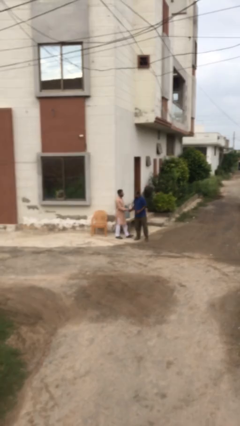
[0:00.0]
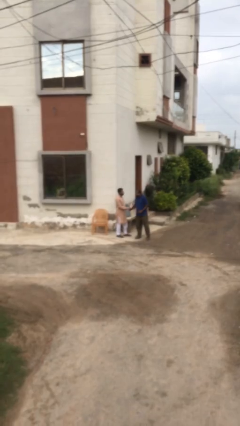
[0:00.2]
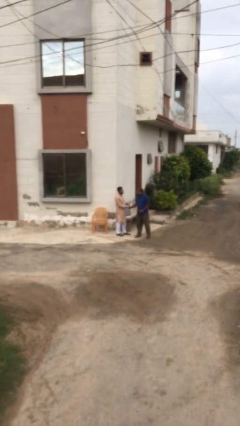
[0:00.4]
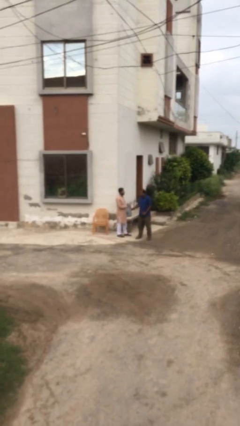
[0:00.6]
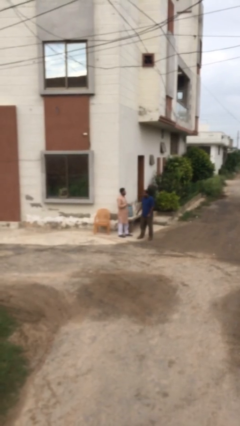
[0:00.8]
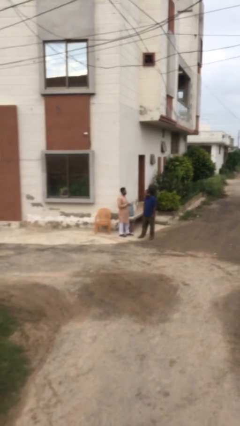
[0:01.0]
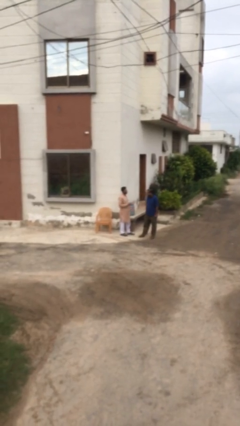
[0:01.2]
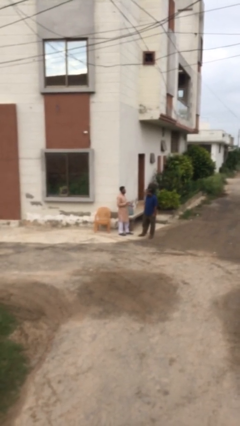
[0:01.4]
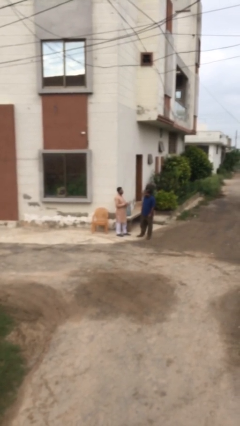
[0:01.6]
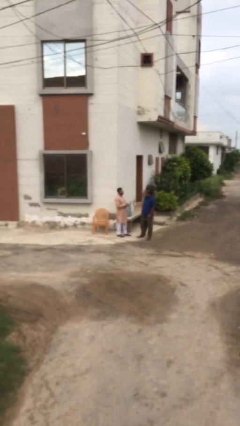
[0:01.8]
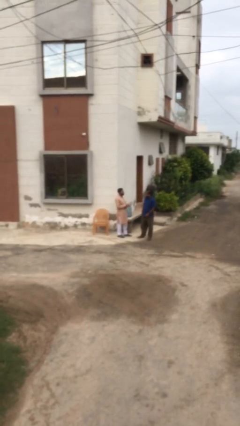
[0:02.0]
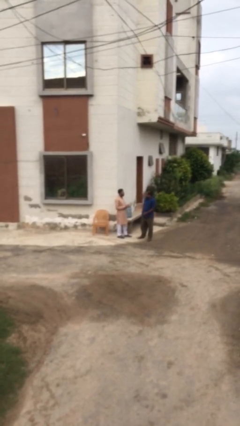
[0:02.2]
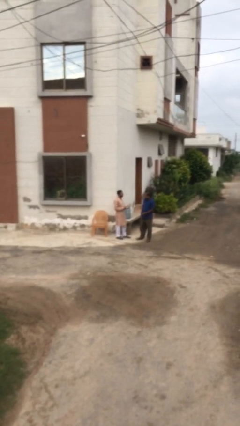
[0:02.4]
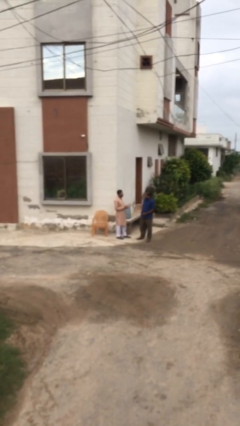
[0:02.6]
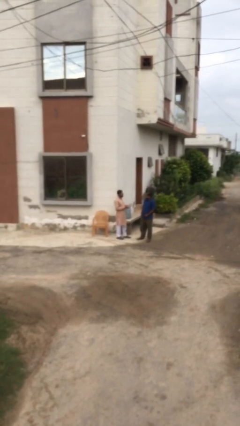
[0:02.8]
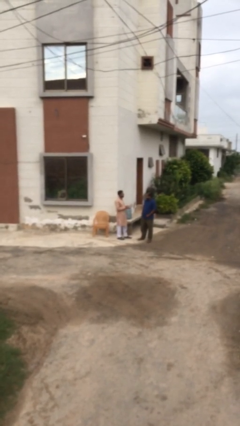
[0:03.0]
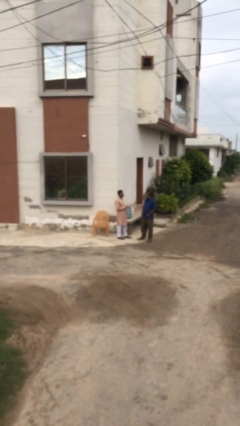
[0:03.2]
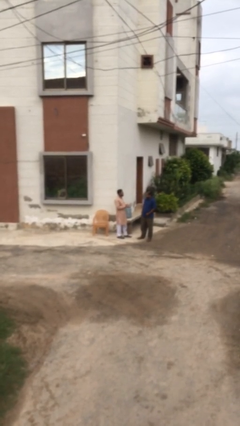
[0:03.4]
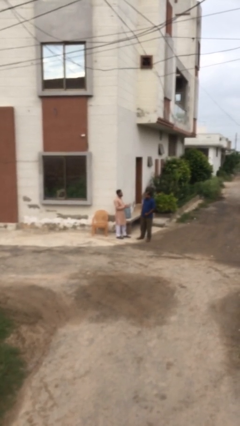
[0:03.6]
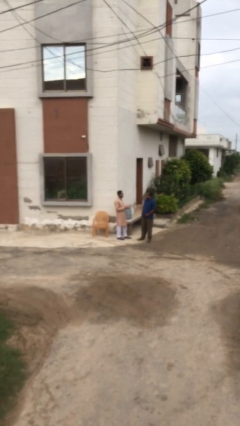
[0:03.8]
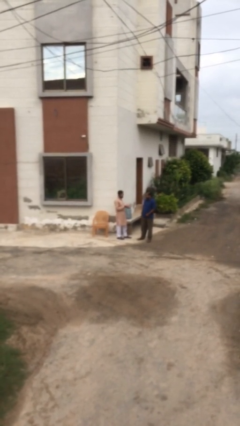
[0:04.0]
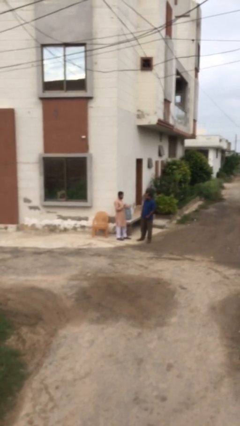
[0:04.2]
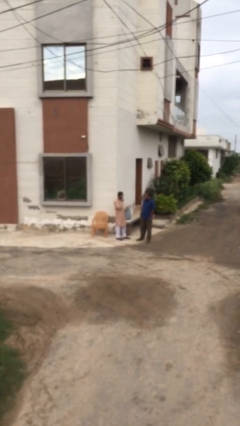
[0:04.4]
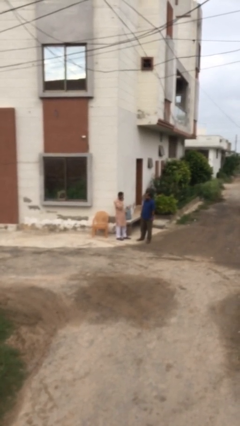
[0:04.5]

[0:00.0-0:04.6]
person talks to person

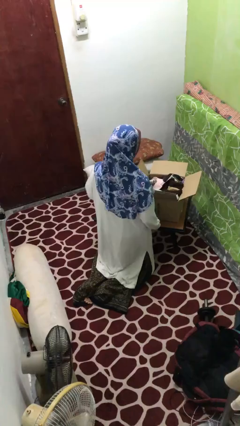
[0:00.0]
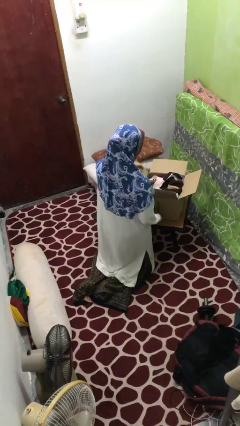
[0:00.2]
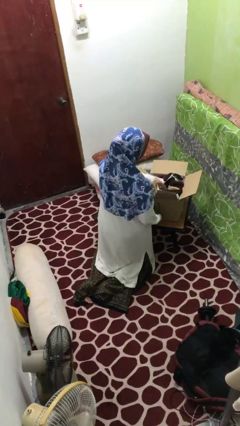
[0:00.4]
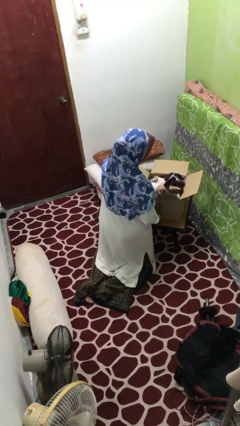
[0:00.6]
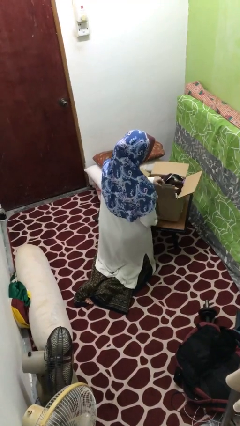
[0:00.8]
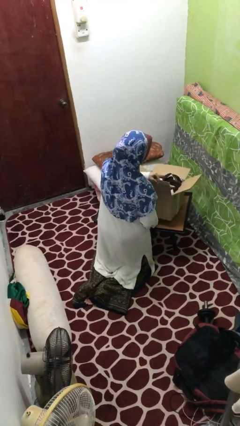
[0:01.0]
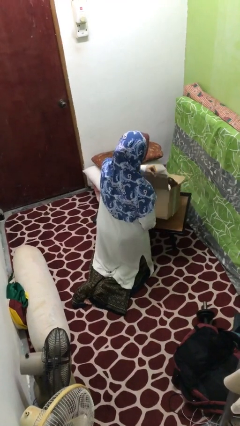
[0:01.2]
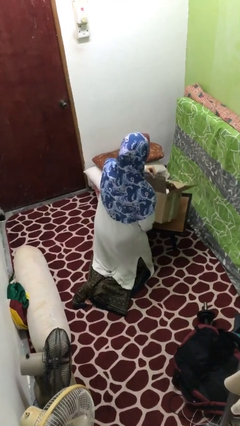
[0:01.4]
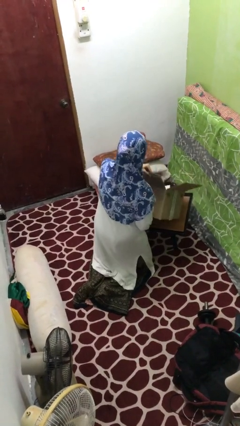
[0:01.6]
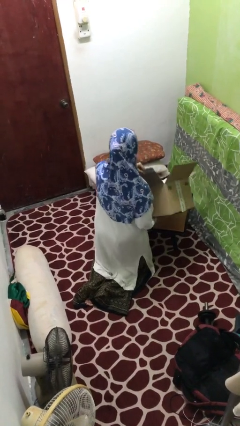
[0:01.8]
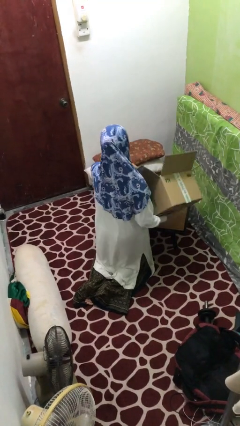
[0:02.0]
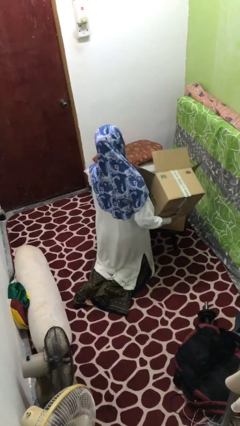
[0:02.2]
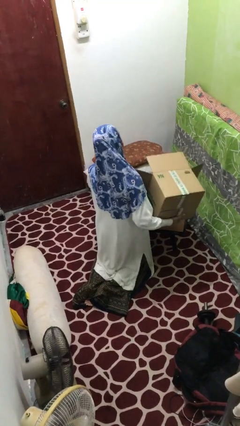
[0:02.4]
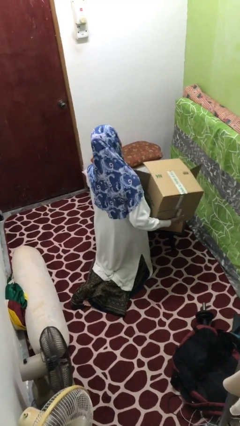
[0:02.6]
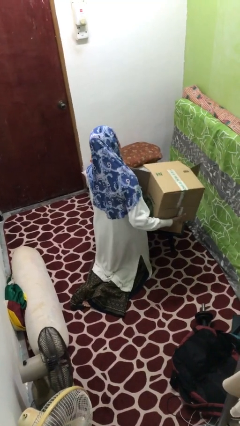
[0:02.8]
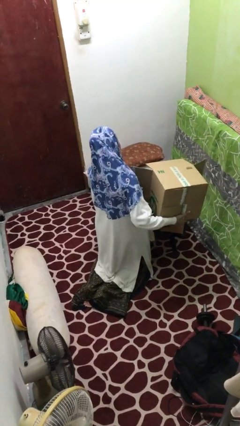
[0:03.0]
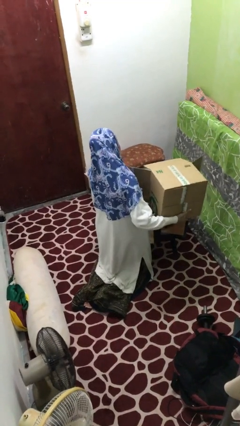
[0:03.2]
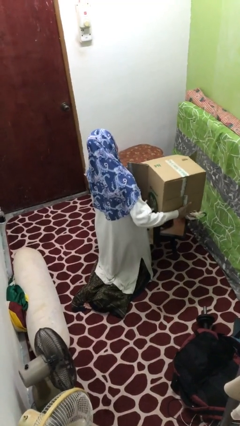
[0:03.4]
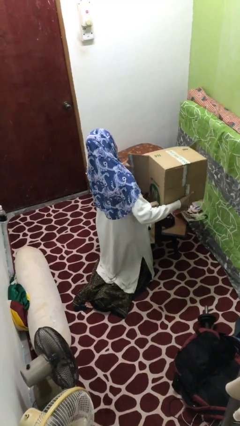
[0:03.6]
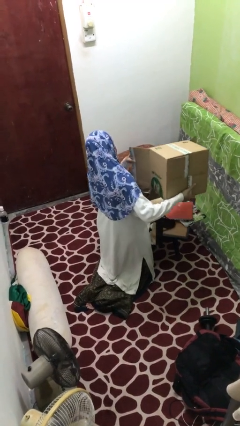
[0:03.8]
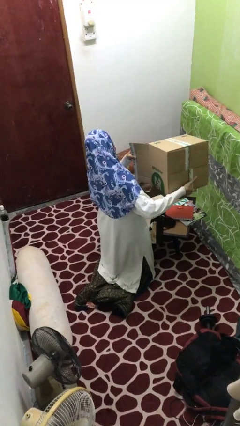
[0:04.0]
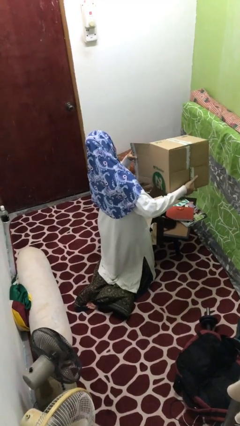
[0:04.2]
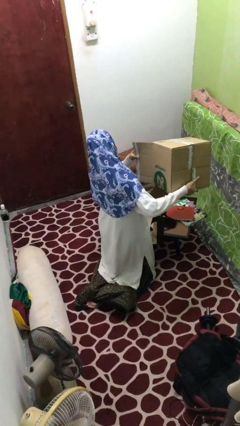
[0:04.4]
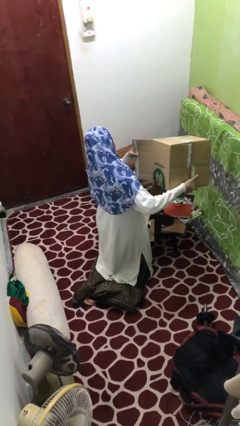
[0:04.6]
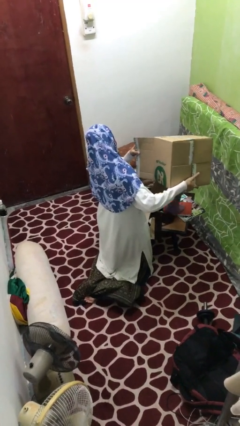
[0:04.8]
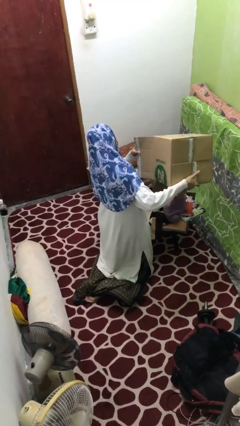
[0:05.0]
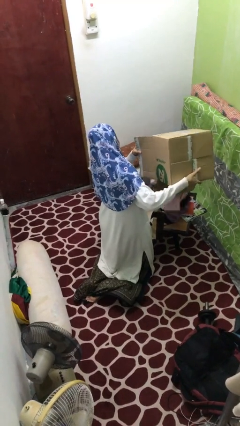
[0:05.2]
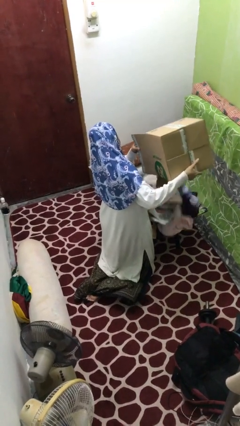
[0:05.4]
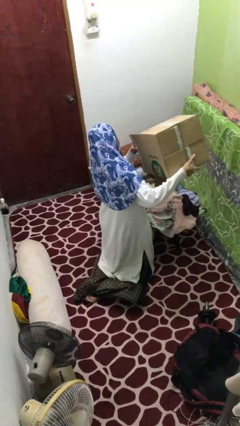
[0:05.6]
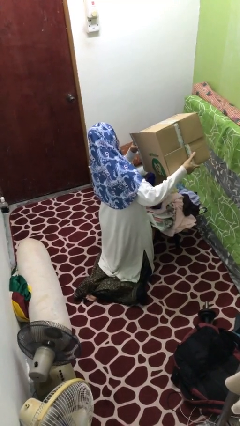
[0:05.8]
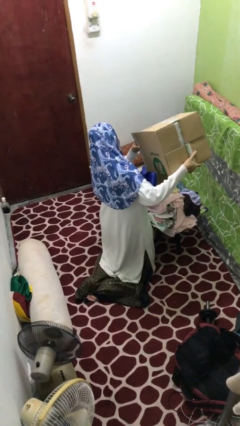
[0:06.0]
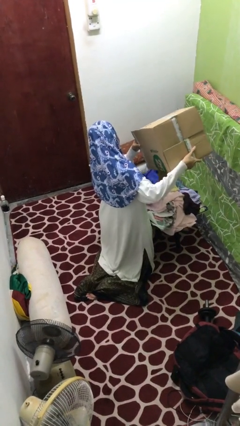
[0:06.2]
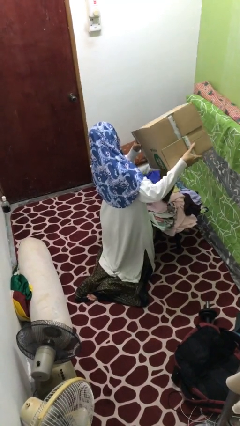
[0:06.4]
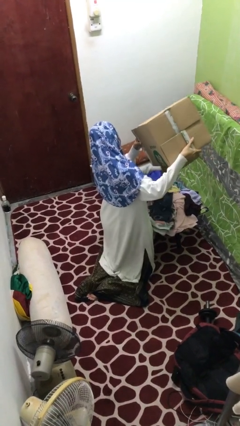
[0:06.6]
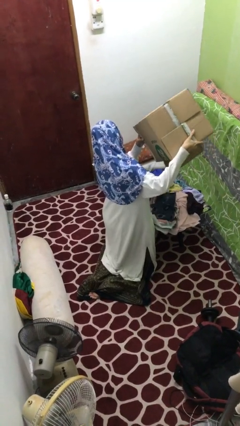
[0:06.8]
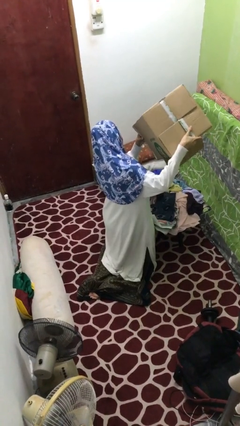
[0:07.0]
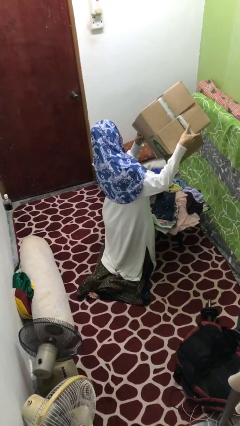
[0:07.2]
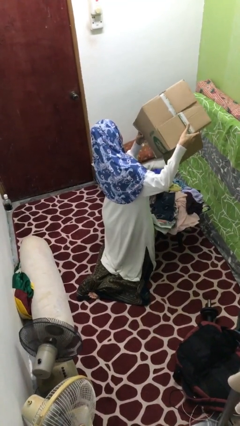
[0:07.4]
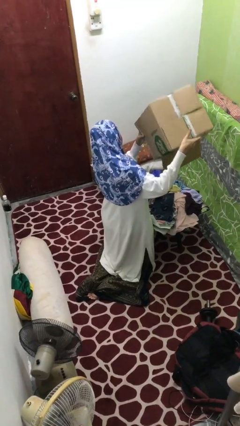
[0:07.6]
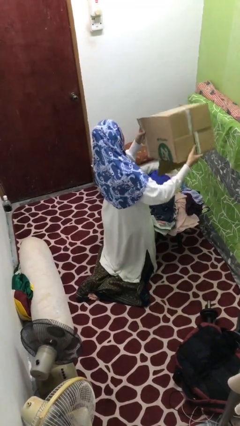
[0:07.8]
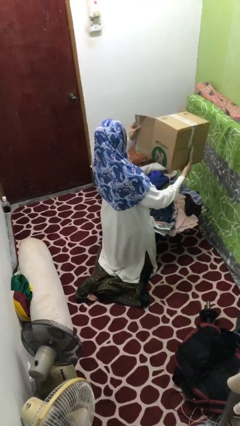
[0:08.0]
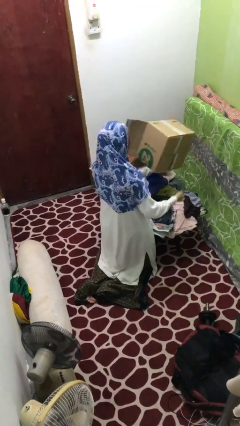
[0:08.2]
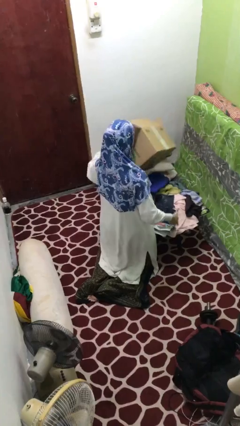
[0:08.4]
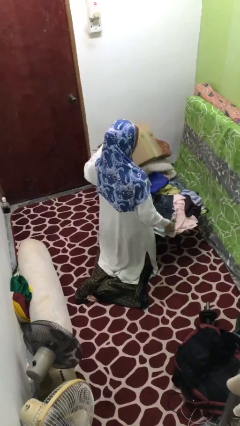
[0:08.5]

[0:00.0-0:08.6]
person unloads box onto table

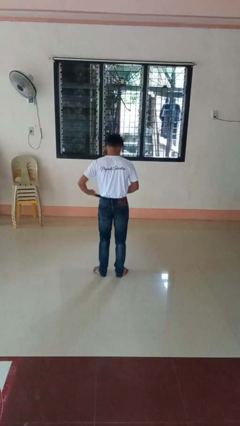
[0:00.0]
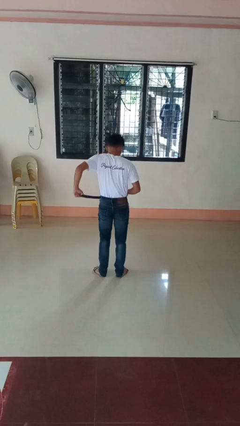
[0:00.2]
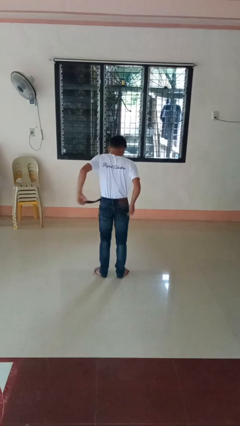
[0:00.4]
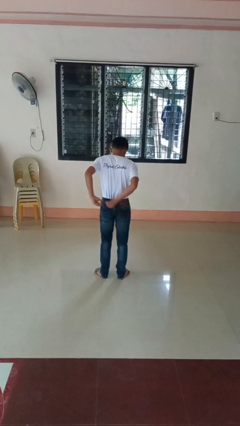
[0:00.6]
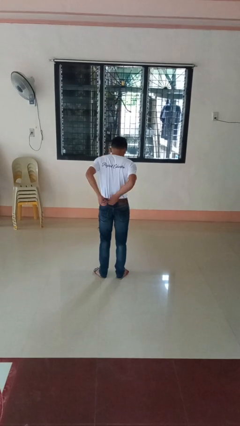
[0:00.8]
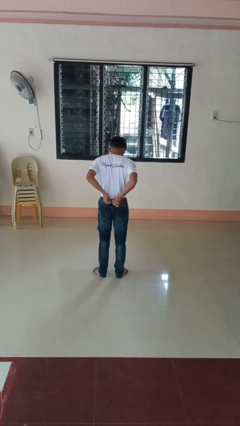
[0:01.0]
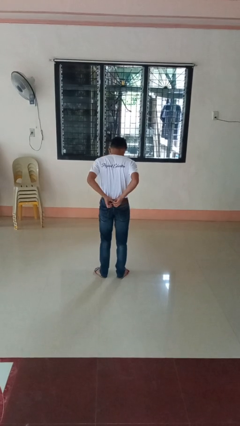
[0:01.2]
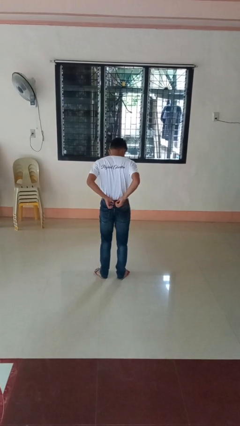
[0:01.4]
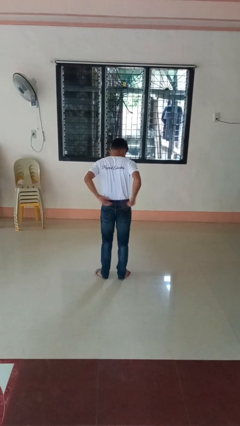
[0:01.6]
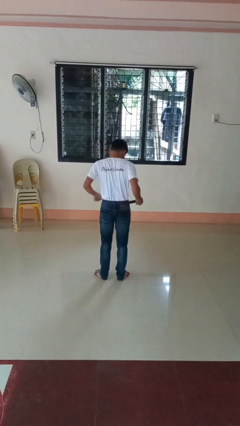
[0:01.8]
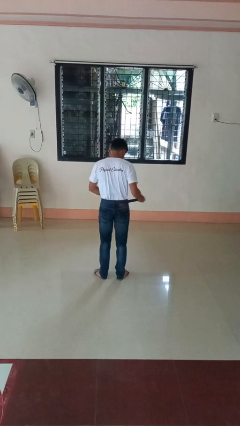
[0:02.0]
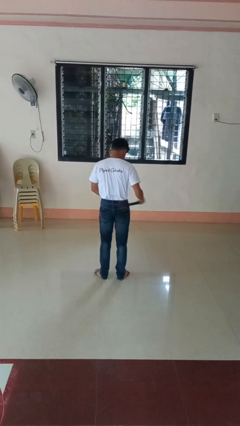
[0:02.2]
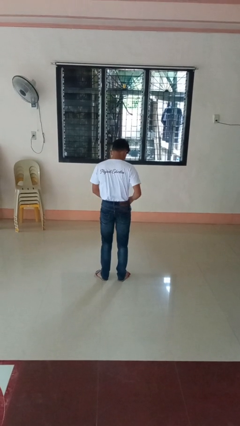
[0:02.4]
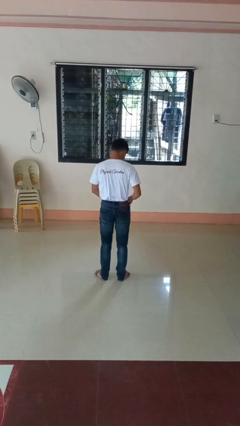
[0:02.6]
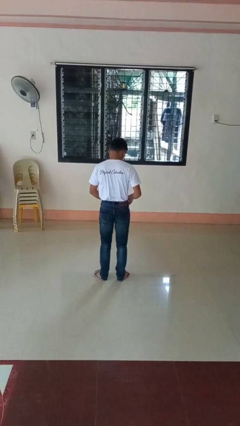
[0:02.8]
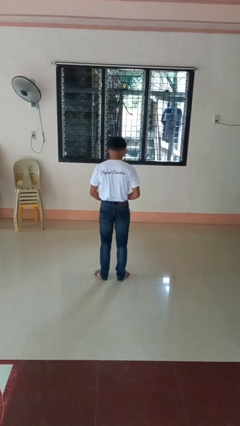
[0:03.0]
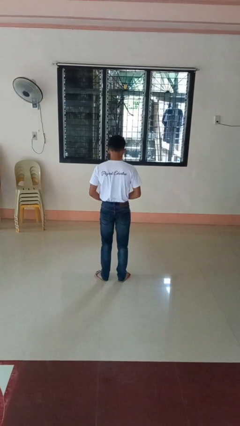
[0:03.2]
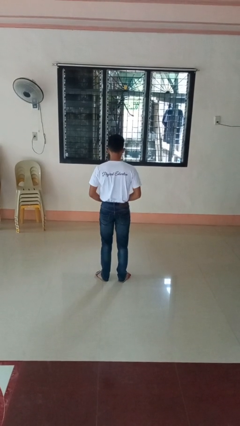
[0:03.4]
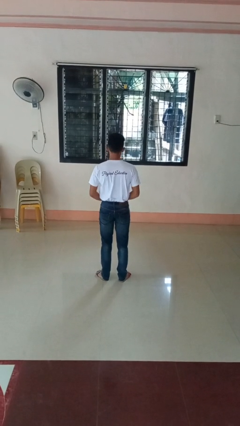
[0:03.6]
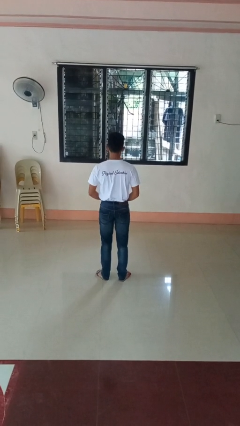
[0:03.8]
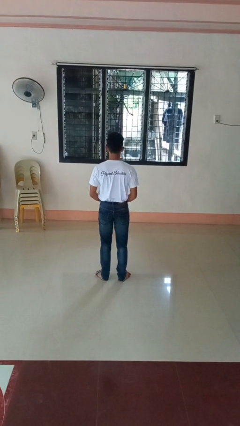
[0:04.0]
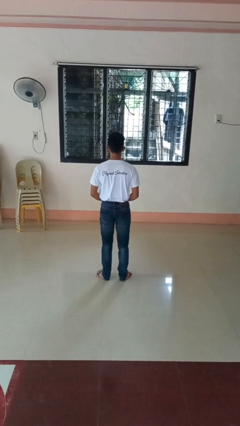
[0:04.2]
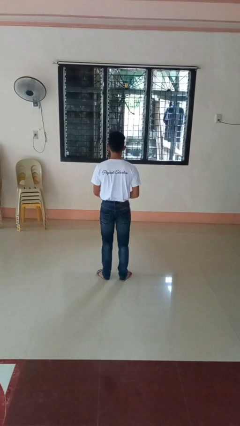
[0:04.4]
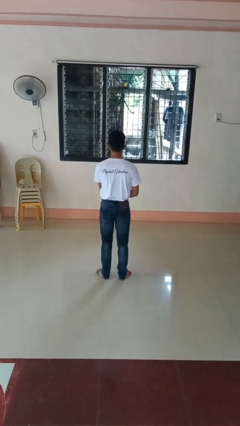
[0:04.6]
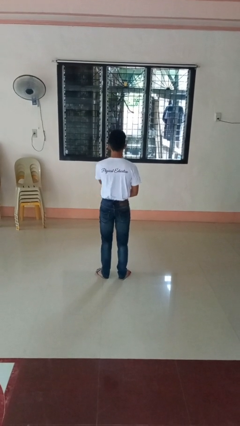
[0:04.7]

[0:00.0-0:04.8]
person puts on belt
